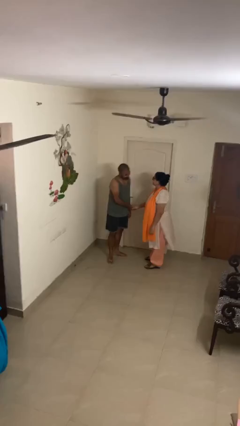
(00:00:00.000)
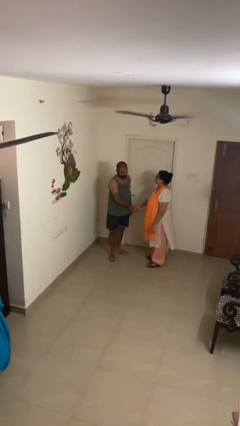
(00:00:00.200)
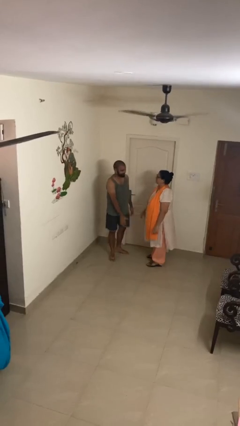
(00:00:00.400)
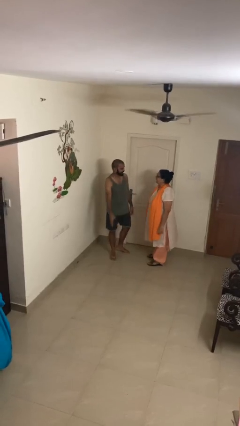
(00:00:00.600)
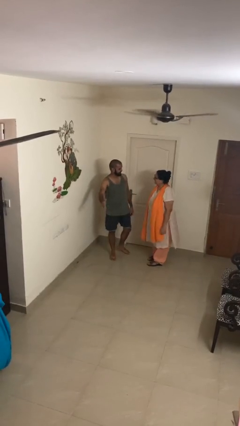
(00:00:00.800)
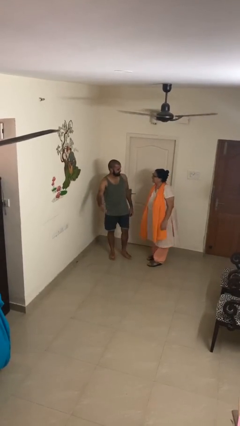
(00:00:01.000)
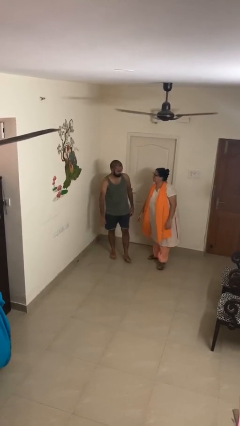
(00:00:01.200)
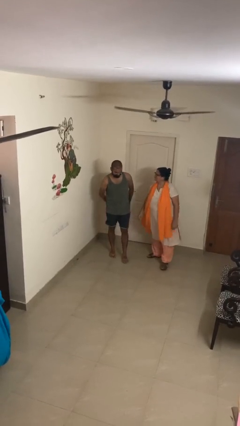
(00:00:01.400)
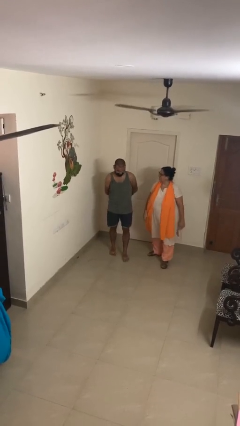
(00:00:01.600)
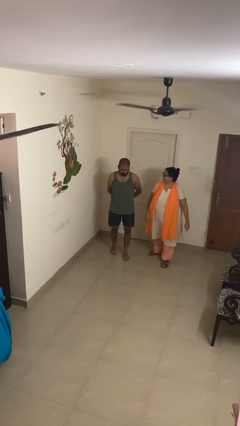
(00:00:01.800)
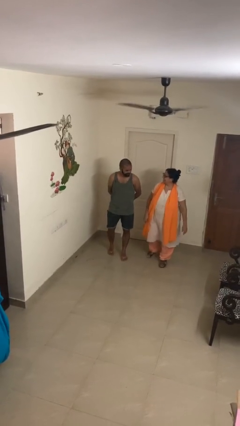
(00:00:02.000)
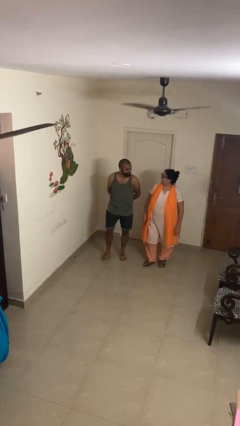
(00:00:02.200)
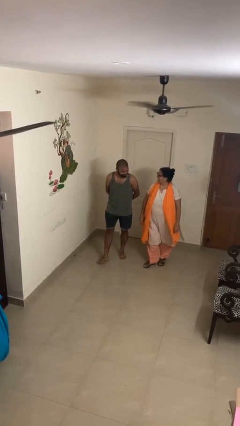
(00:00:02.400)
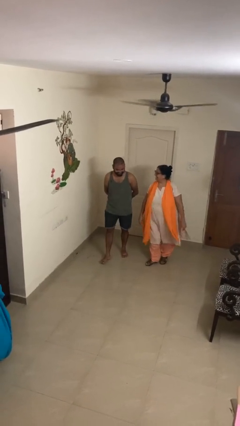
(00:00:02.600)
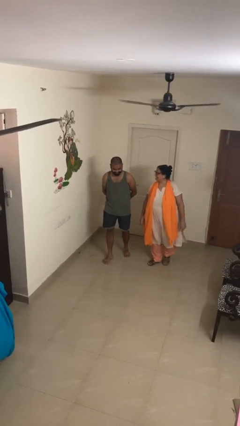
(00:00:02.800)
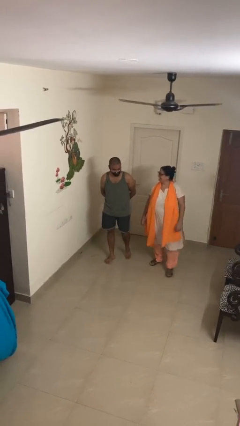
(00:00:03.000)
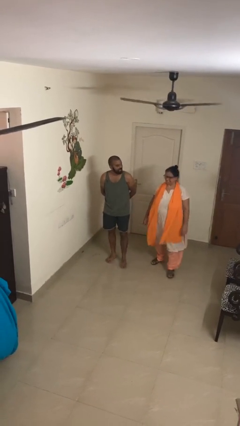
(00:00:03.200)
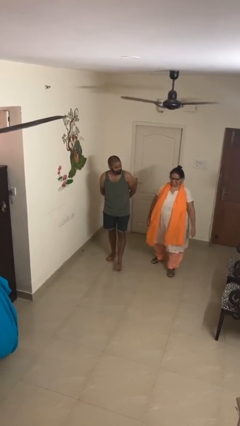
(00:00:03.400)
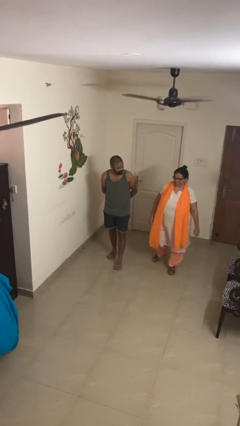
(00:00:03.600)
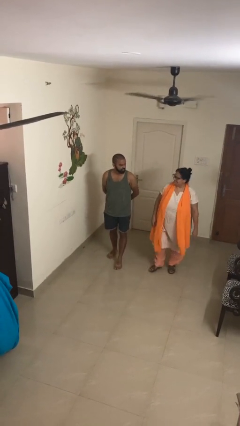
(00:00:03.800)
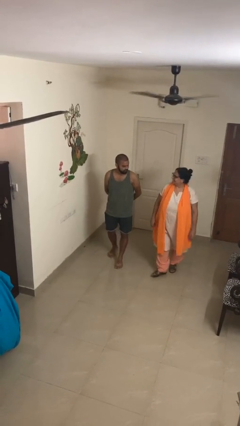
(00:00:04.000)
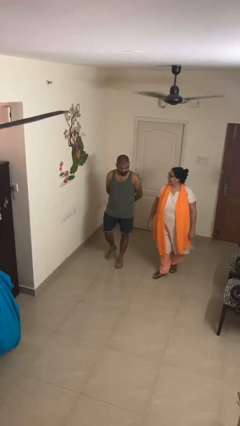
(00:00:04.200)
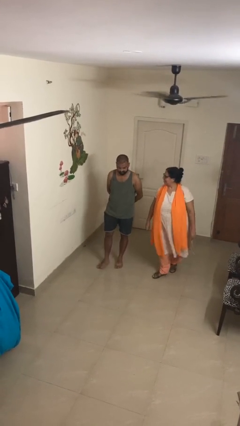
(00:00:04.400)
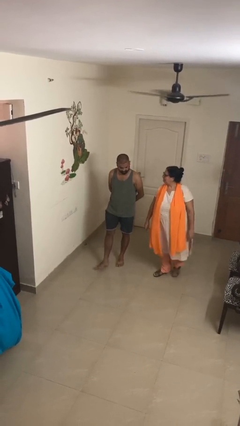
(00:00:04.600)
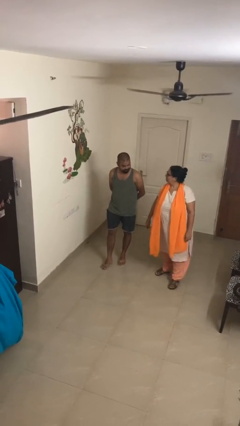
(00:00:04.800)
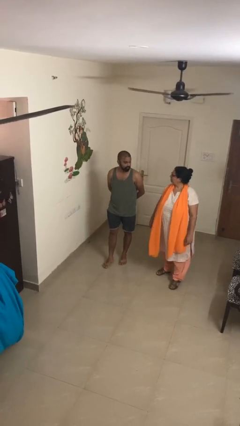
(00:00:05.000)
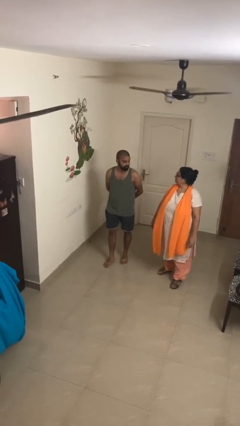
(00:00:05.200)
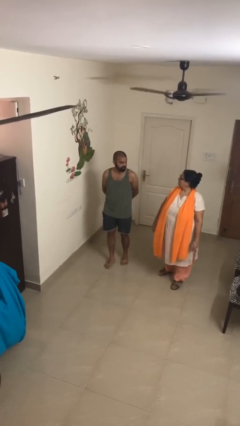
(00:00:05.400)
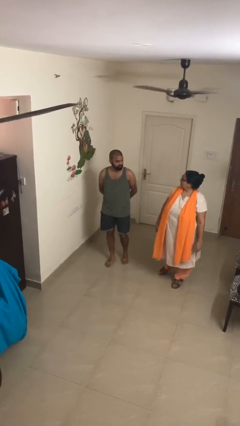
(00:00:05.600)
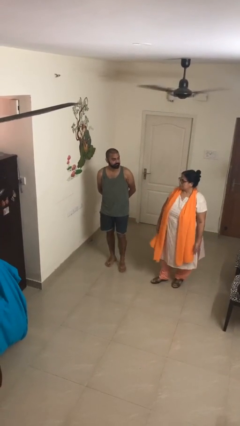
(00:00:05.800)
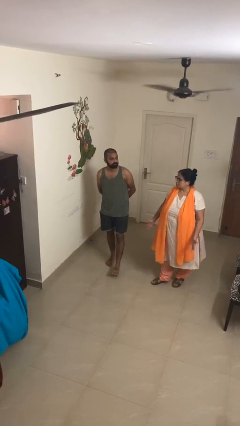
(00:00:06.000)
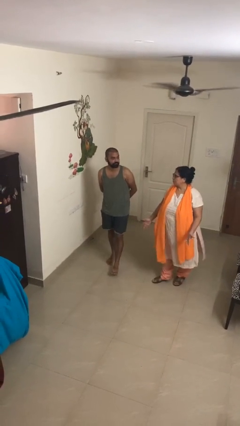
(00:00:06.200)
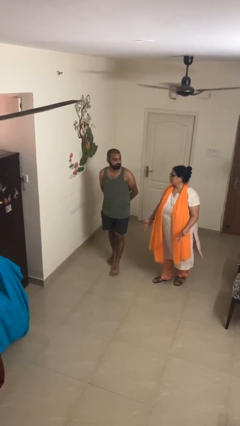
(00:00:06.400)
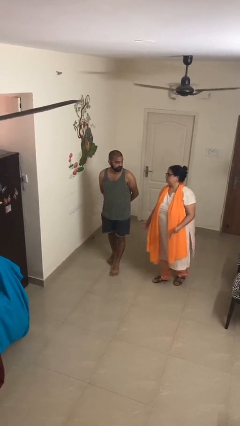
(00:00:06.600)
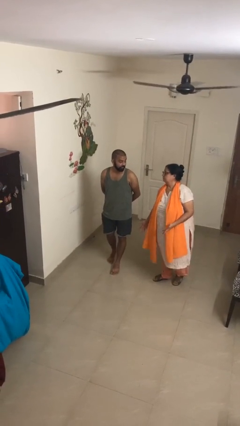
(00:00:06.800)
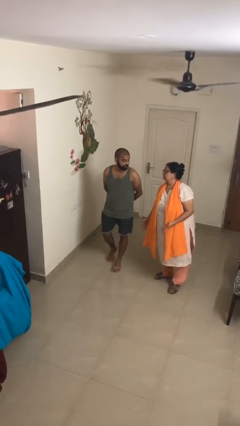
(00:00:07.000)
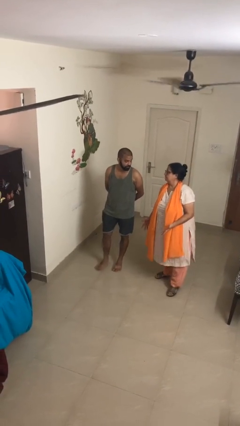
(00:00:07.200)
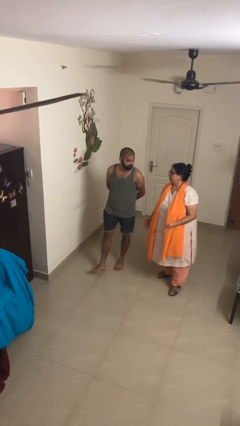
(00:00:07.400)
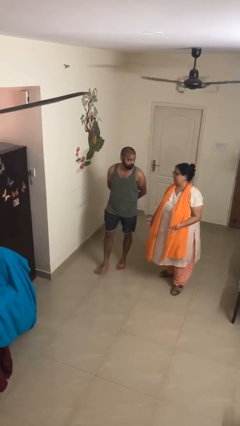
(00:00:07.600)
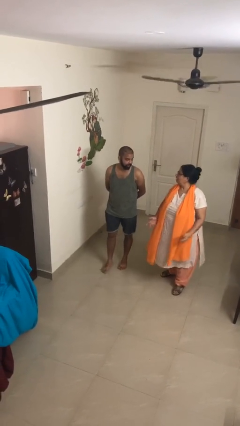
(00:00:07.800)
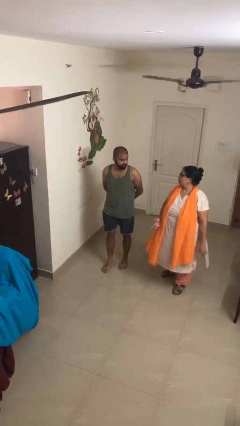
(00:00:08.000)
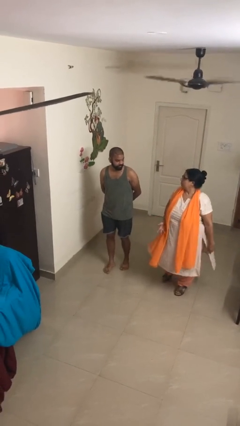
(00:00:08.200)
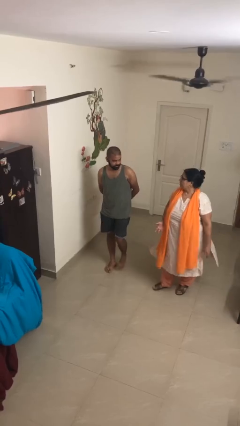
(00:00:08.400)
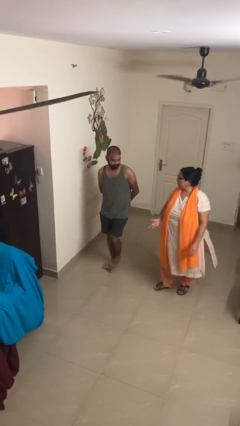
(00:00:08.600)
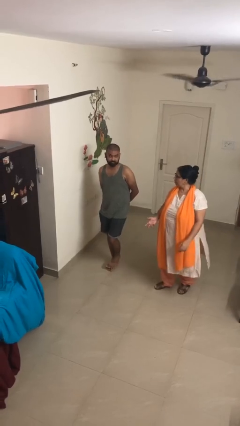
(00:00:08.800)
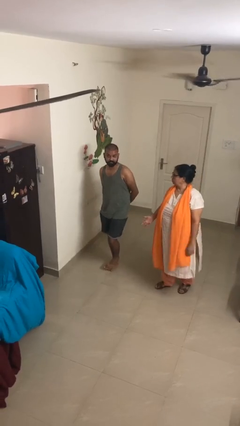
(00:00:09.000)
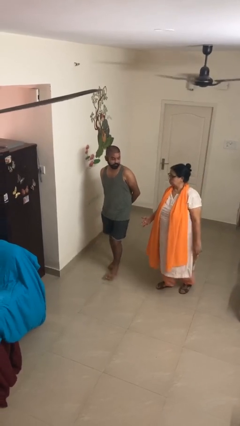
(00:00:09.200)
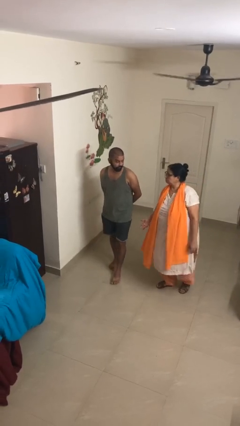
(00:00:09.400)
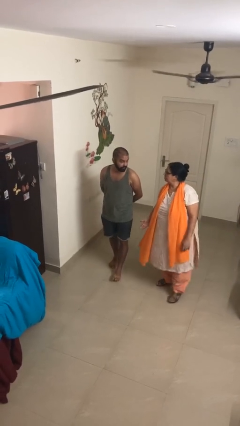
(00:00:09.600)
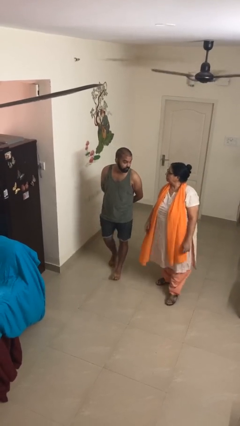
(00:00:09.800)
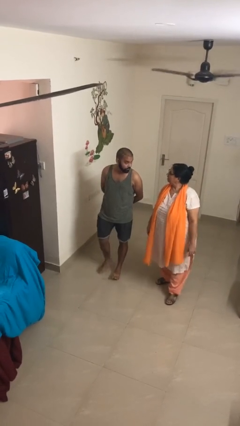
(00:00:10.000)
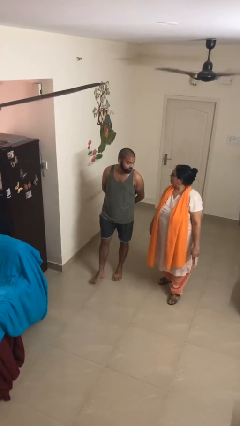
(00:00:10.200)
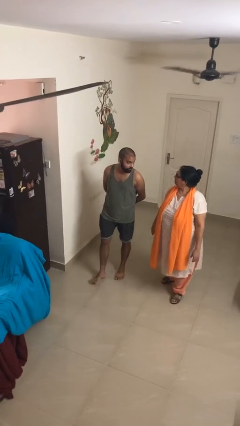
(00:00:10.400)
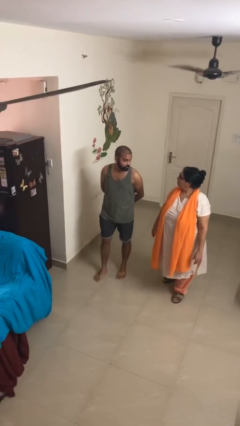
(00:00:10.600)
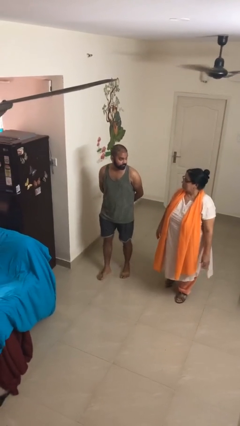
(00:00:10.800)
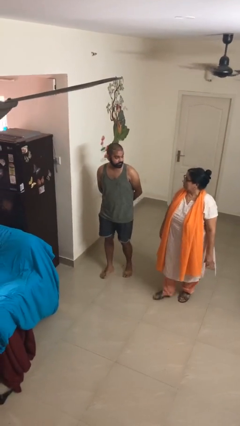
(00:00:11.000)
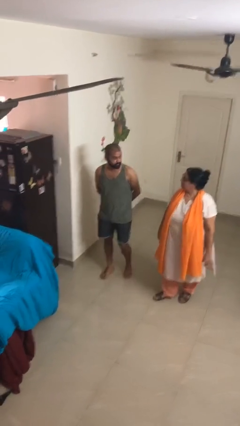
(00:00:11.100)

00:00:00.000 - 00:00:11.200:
person talks to person

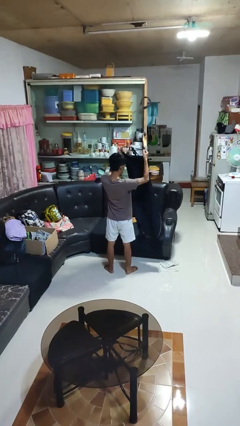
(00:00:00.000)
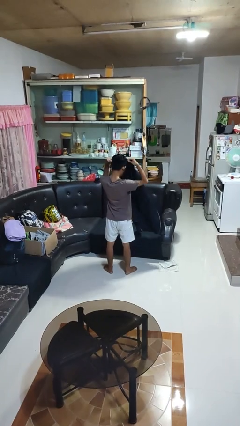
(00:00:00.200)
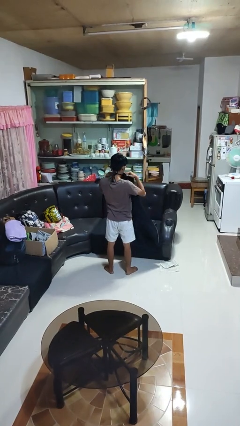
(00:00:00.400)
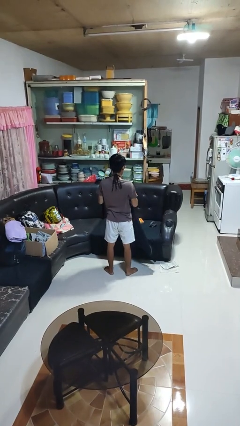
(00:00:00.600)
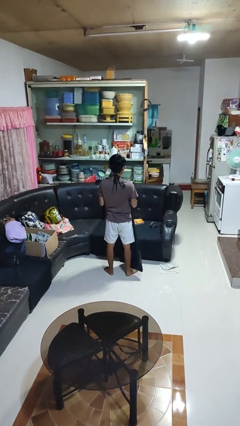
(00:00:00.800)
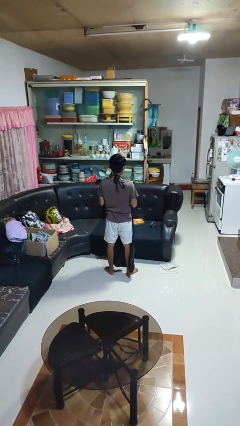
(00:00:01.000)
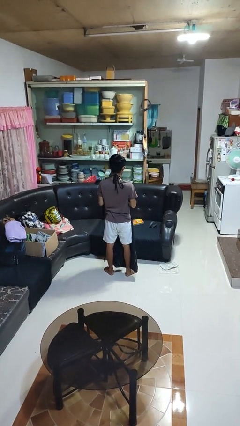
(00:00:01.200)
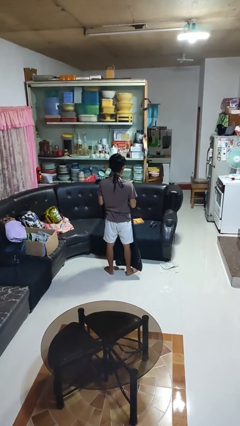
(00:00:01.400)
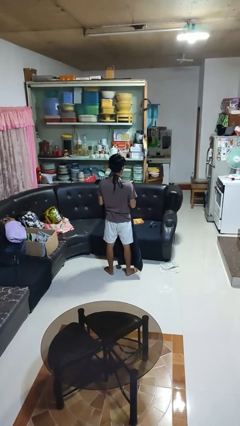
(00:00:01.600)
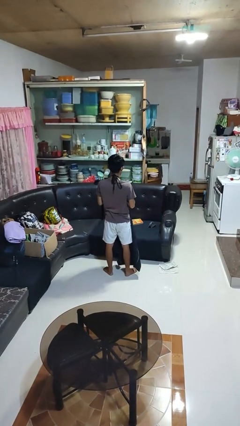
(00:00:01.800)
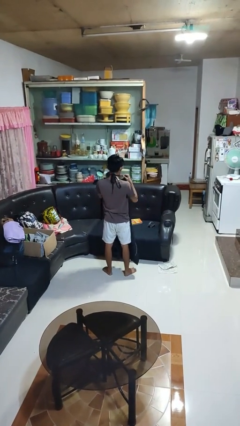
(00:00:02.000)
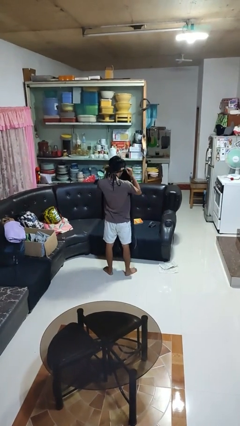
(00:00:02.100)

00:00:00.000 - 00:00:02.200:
person puts on apron

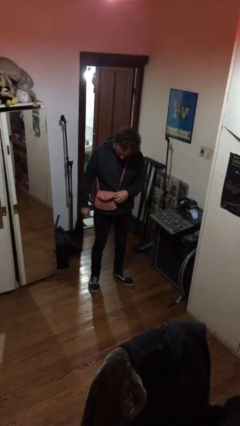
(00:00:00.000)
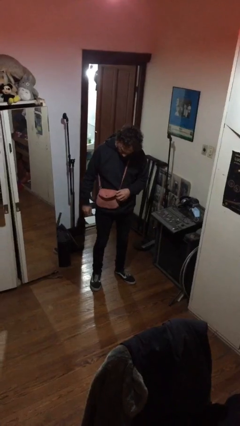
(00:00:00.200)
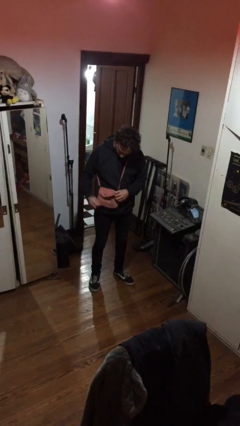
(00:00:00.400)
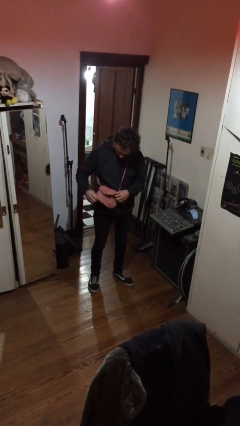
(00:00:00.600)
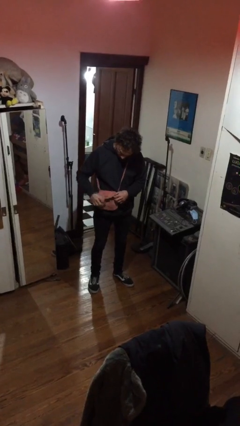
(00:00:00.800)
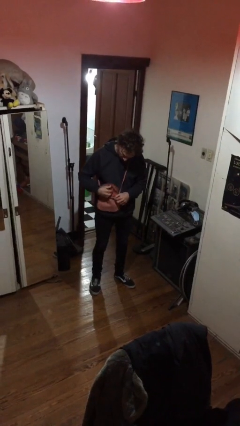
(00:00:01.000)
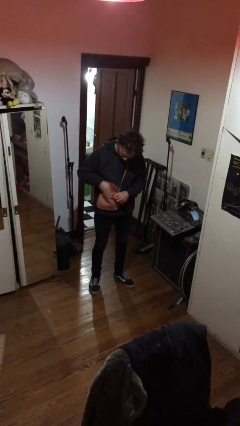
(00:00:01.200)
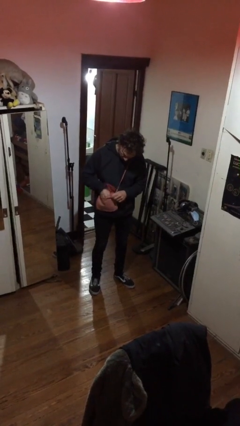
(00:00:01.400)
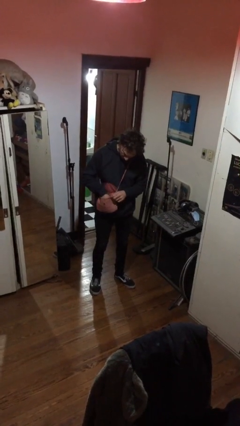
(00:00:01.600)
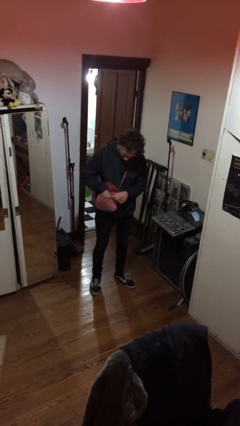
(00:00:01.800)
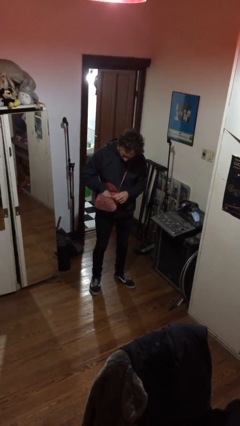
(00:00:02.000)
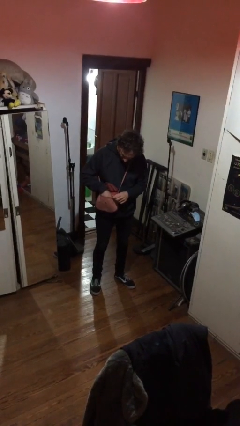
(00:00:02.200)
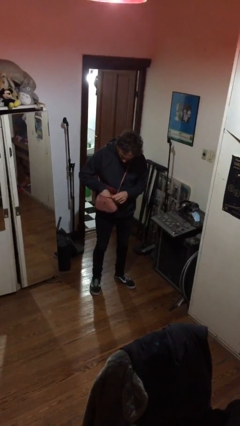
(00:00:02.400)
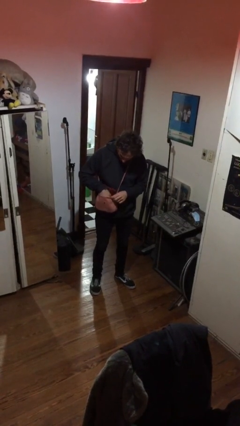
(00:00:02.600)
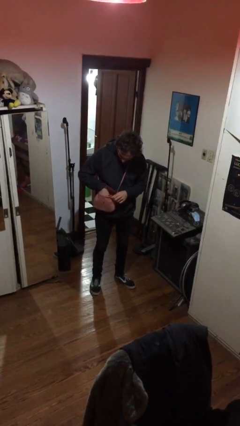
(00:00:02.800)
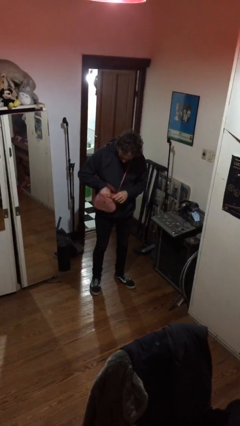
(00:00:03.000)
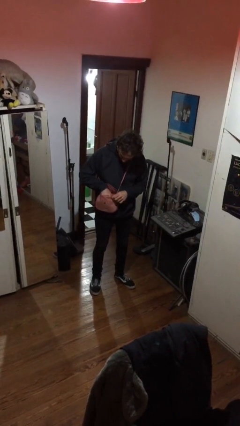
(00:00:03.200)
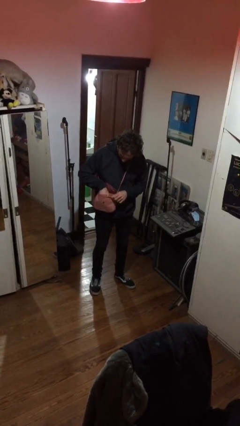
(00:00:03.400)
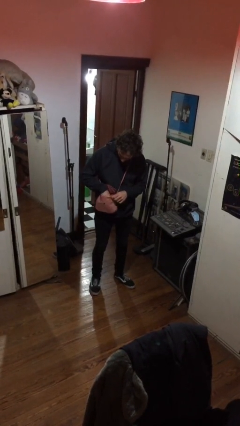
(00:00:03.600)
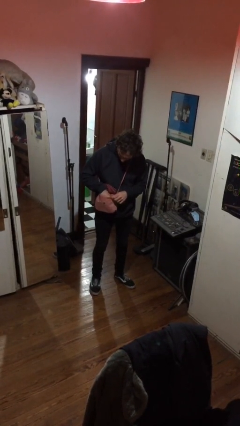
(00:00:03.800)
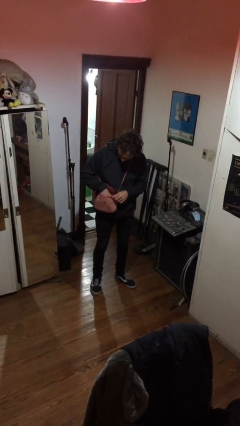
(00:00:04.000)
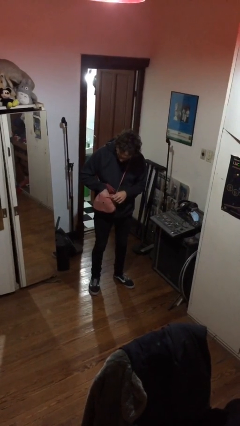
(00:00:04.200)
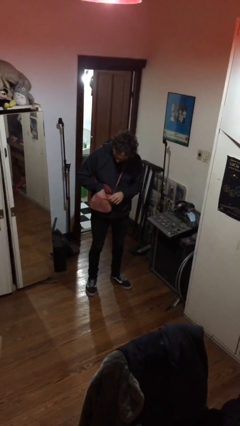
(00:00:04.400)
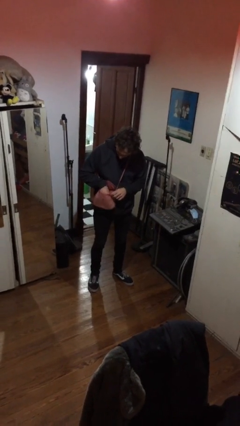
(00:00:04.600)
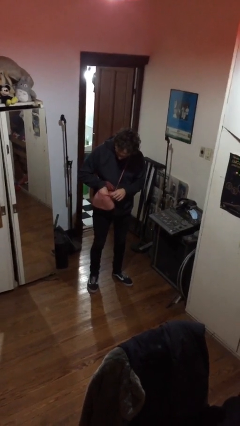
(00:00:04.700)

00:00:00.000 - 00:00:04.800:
person searches in purse
